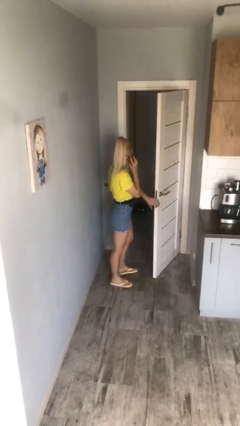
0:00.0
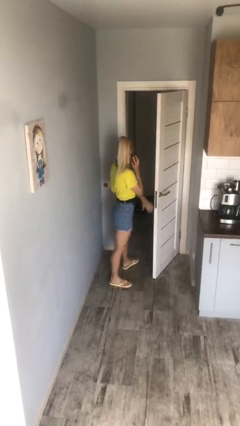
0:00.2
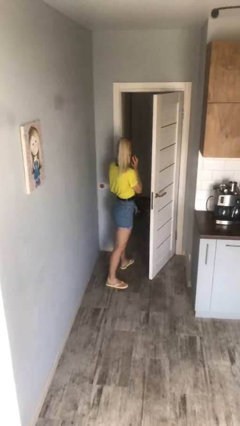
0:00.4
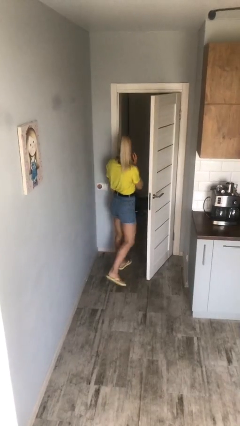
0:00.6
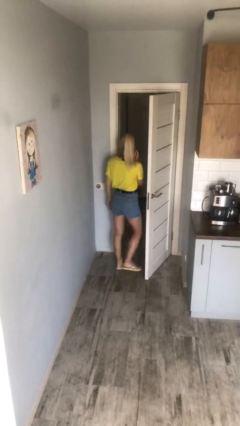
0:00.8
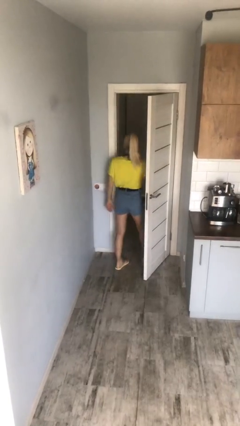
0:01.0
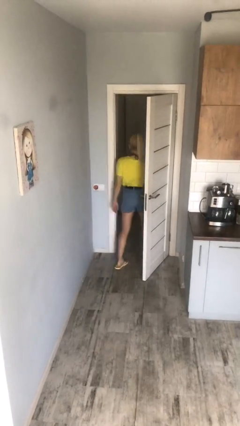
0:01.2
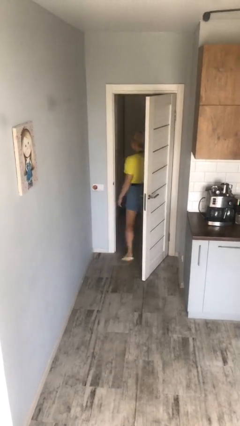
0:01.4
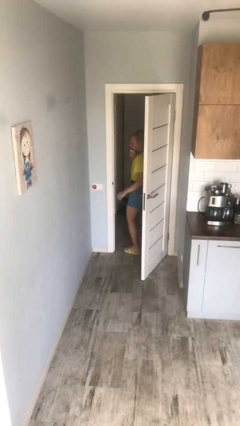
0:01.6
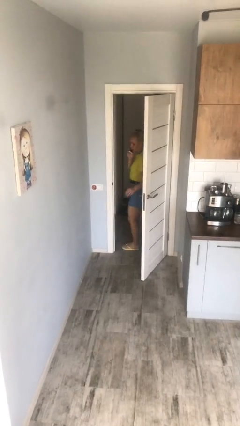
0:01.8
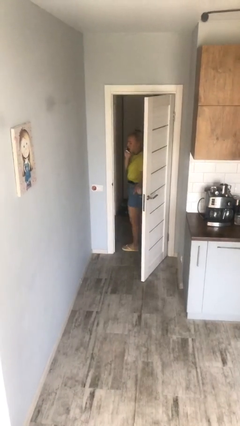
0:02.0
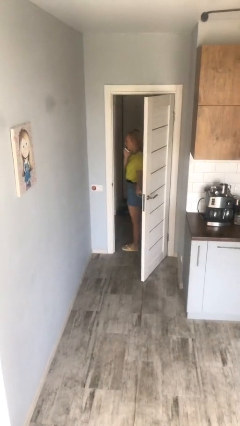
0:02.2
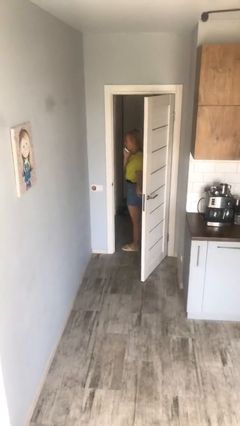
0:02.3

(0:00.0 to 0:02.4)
person exits scene through structure

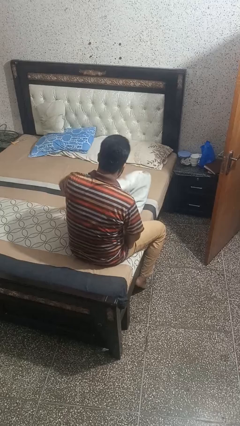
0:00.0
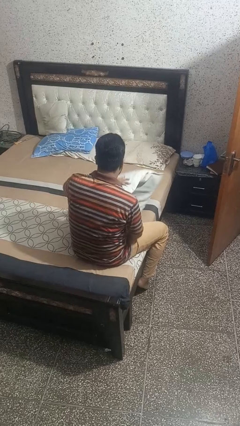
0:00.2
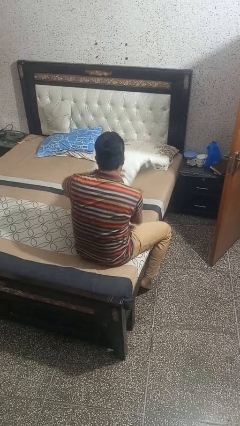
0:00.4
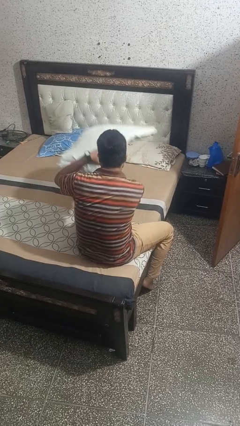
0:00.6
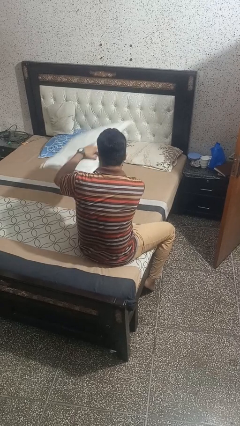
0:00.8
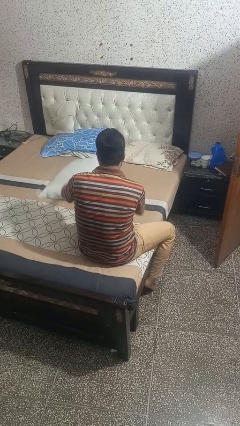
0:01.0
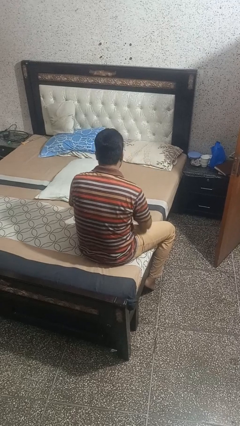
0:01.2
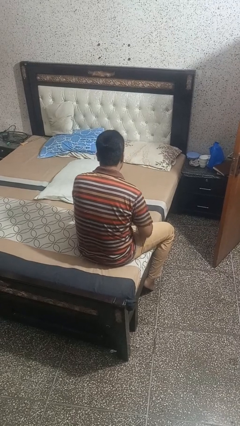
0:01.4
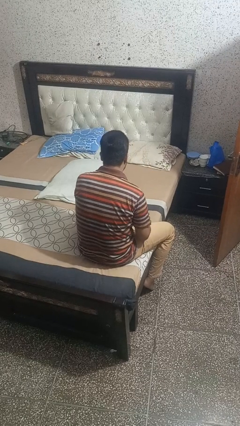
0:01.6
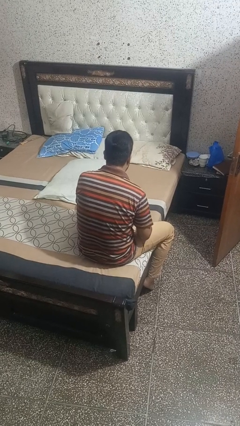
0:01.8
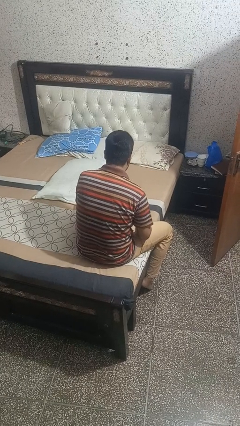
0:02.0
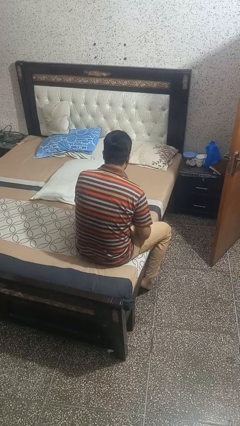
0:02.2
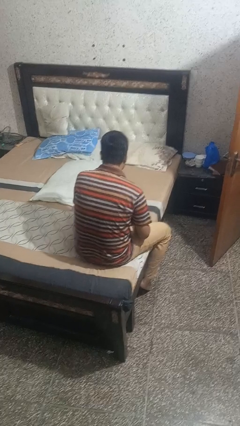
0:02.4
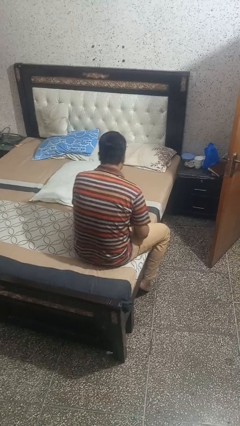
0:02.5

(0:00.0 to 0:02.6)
person puts down object on bed

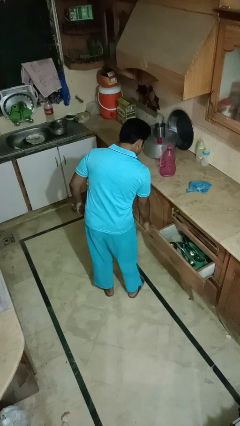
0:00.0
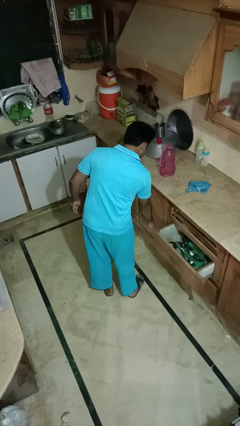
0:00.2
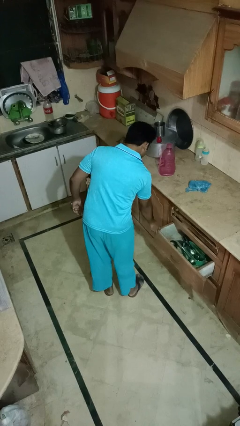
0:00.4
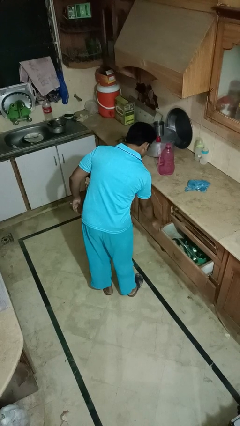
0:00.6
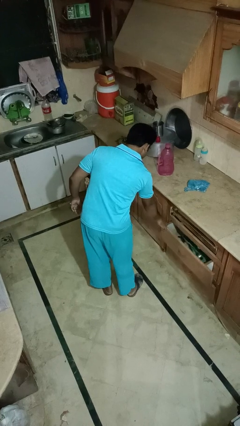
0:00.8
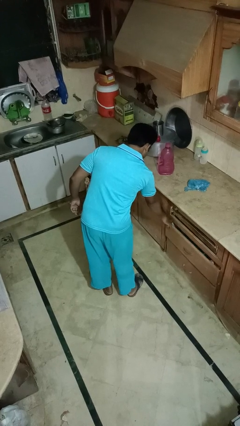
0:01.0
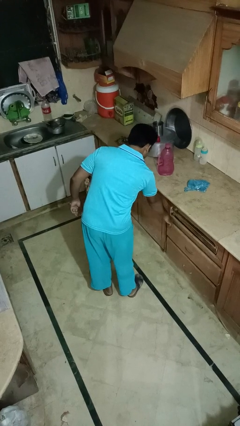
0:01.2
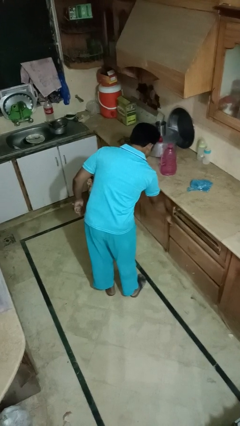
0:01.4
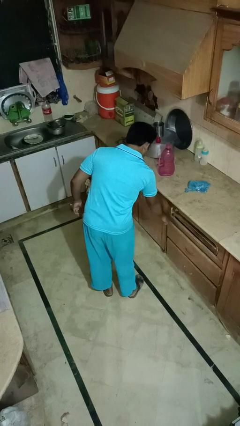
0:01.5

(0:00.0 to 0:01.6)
person closes kitchen drawer

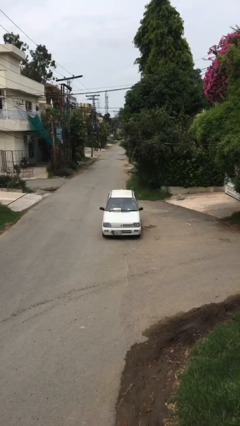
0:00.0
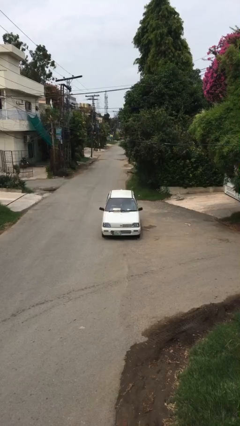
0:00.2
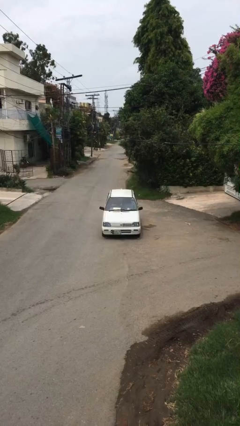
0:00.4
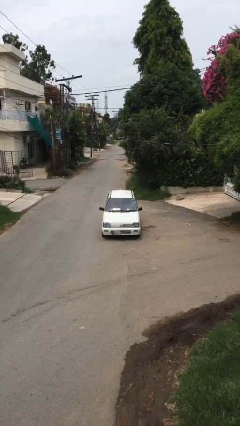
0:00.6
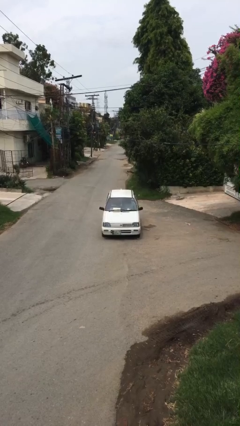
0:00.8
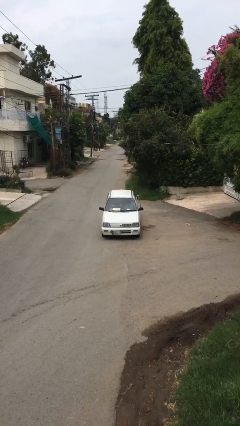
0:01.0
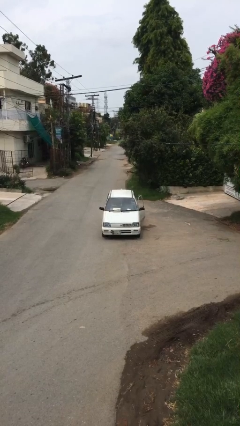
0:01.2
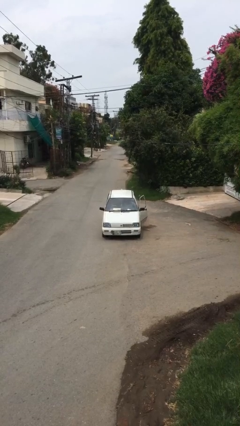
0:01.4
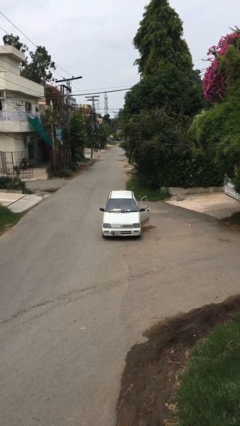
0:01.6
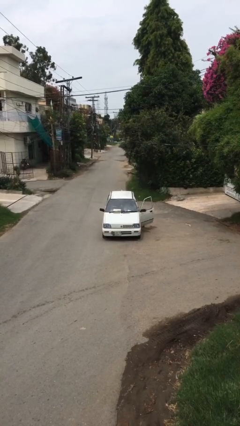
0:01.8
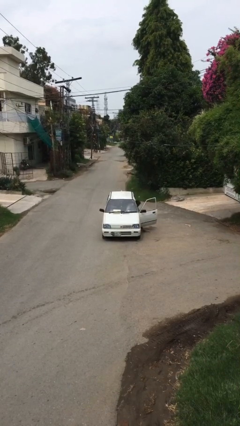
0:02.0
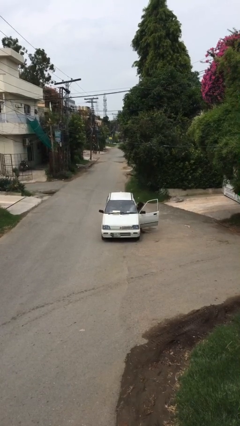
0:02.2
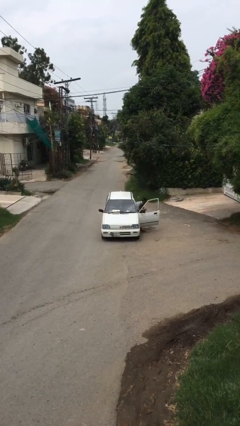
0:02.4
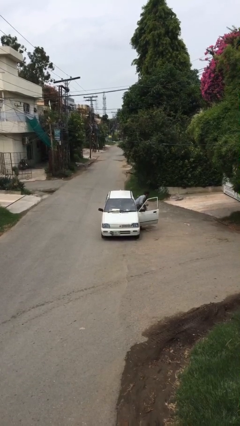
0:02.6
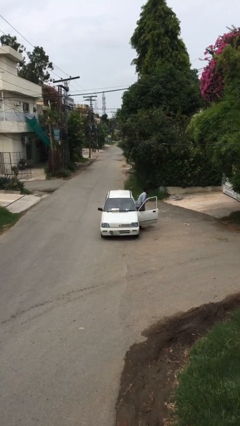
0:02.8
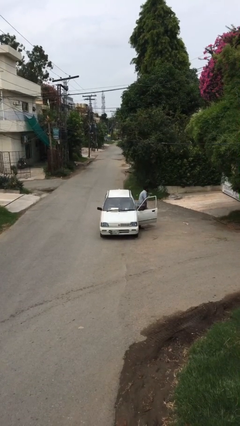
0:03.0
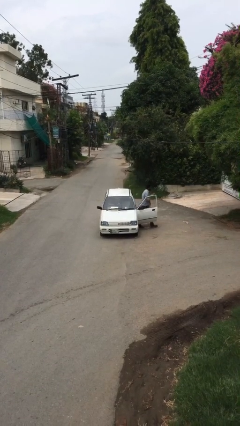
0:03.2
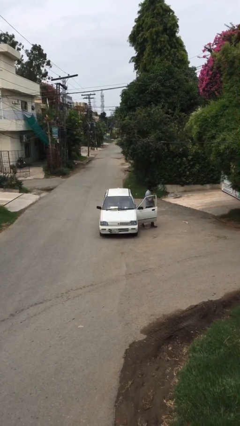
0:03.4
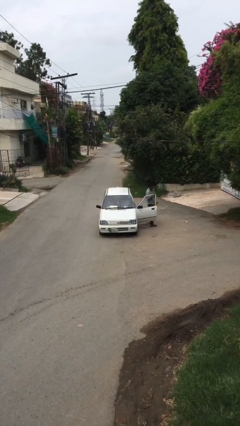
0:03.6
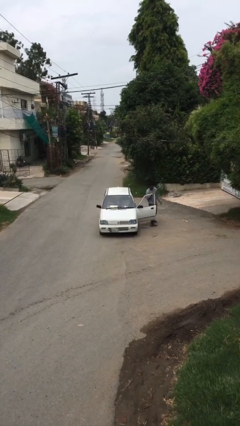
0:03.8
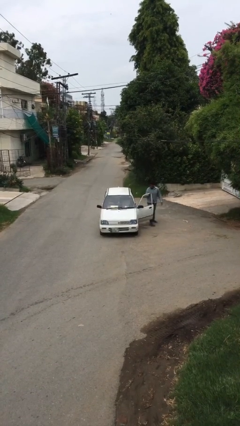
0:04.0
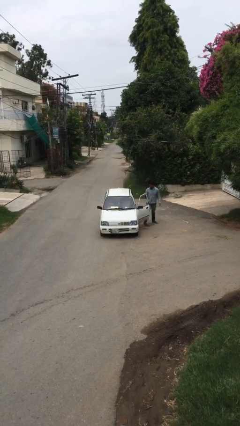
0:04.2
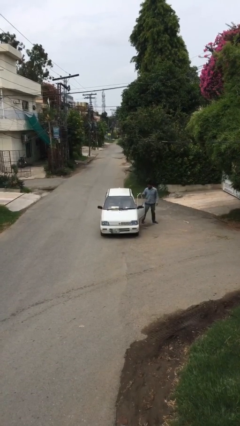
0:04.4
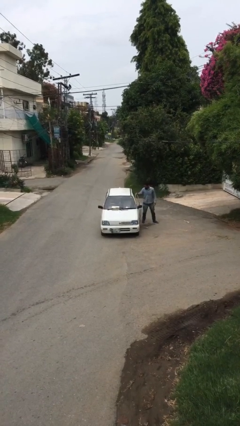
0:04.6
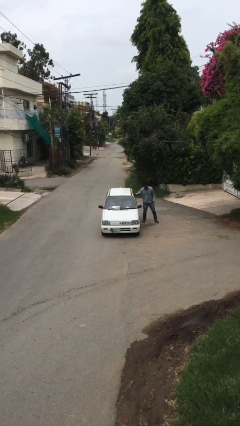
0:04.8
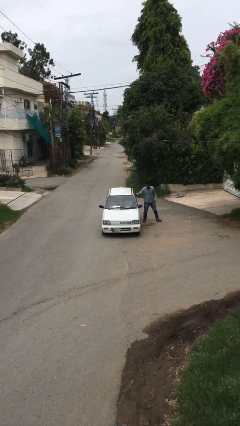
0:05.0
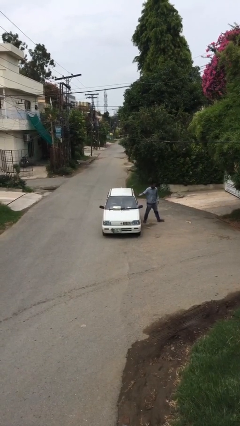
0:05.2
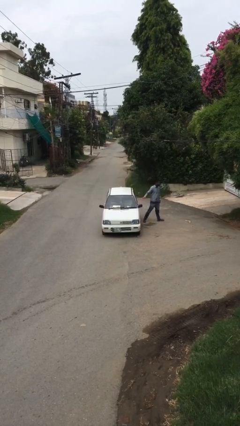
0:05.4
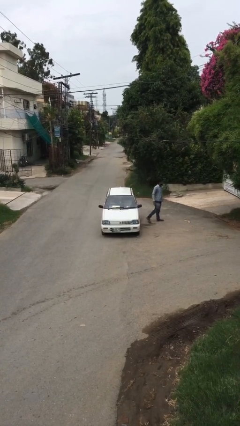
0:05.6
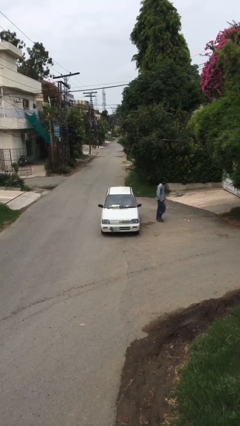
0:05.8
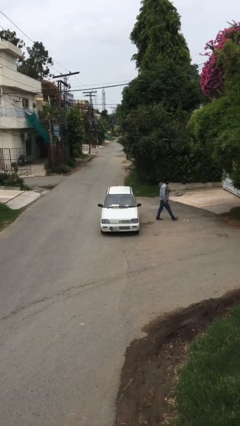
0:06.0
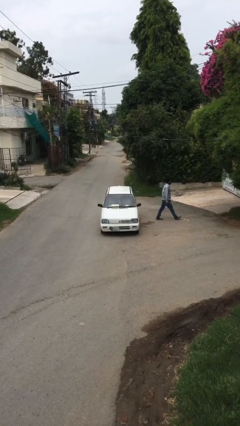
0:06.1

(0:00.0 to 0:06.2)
car drops off person

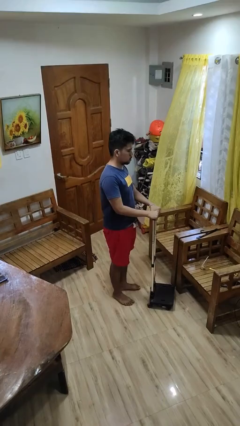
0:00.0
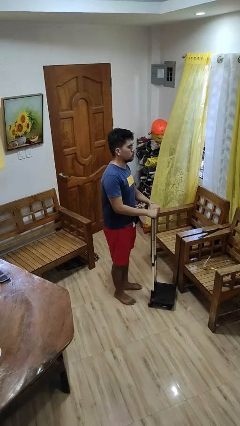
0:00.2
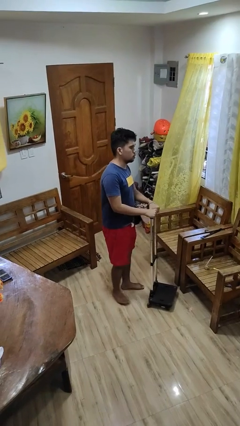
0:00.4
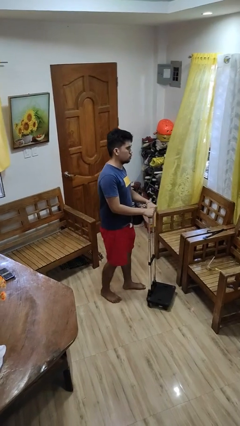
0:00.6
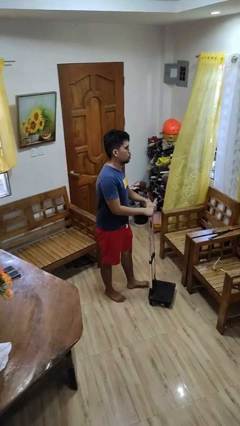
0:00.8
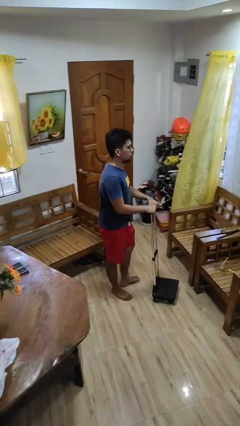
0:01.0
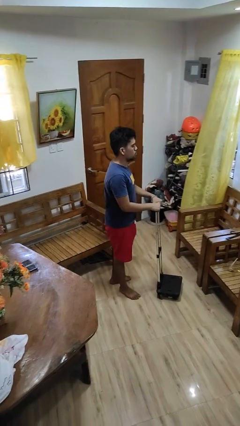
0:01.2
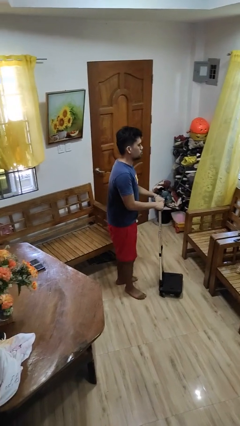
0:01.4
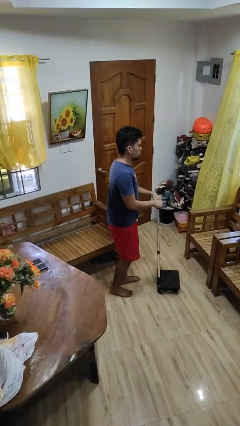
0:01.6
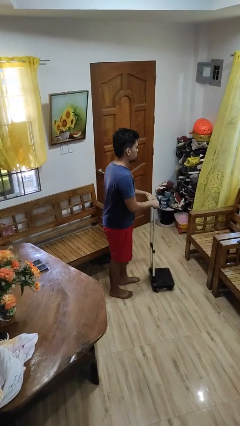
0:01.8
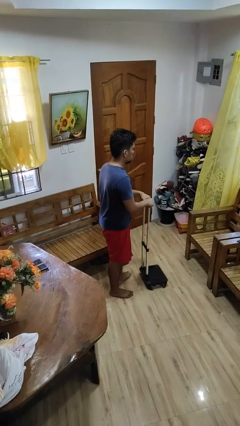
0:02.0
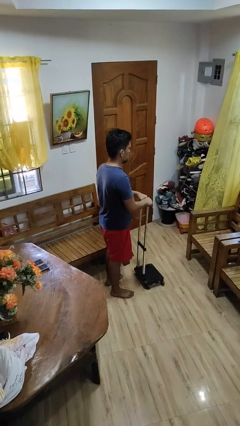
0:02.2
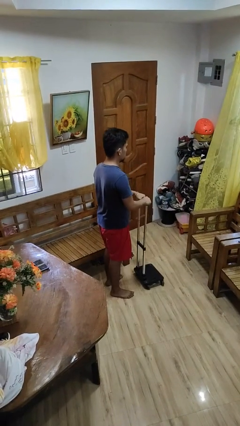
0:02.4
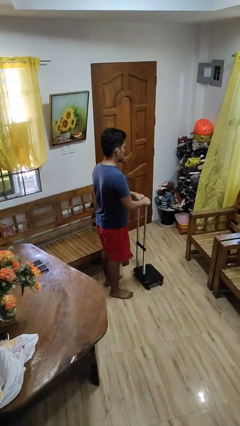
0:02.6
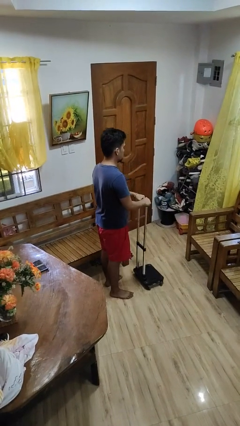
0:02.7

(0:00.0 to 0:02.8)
person pulls wheeled cart

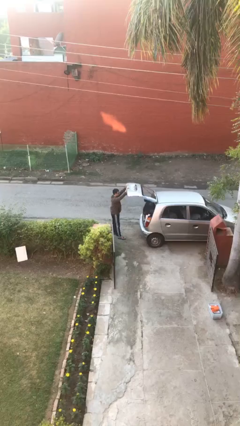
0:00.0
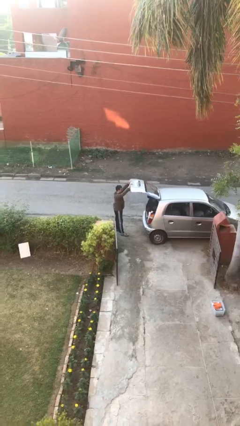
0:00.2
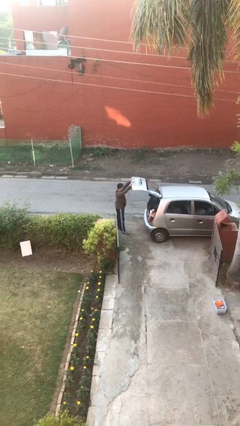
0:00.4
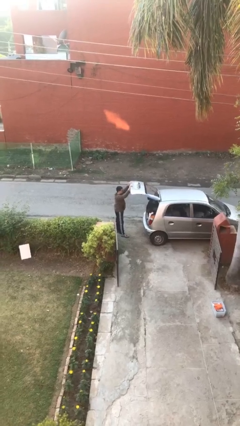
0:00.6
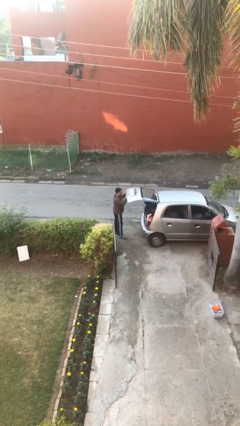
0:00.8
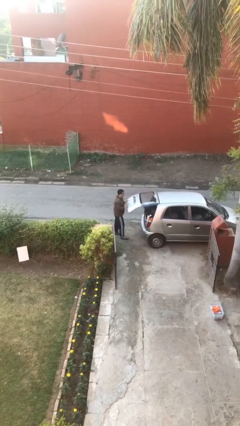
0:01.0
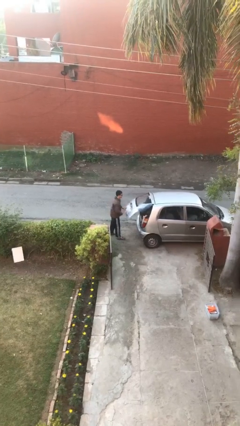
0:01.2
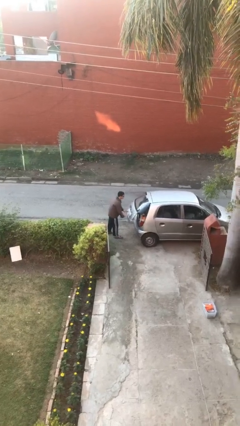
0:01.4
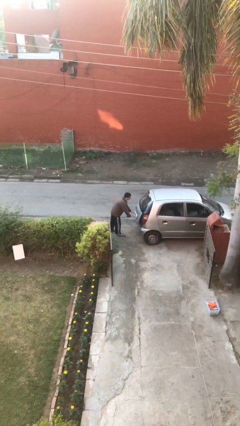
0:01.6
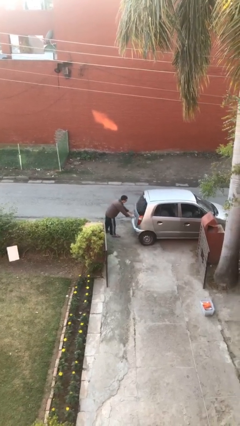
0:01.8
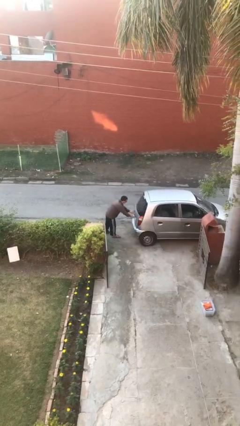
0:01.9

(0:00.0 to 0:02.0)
person closes car trunk
